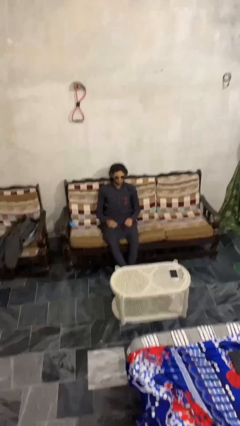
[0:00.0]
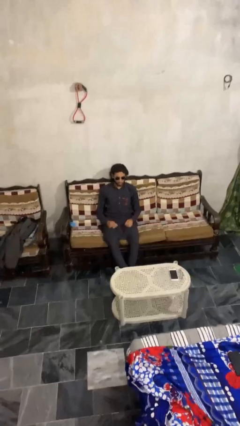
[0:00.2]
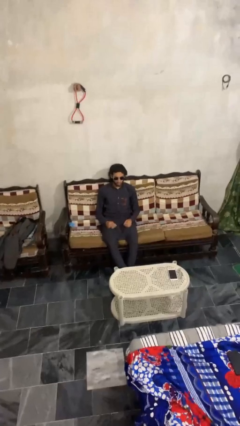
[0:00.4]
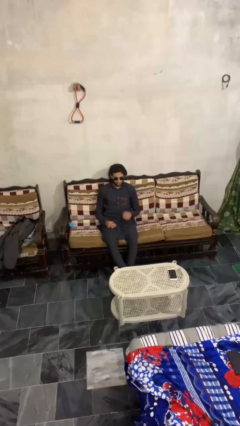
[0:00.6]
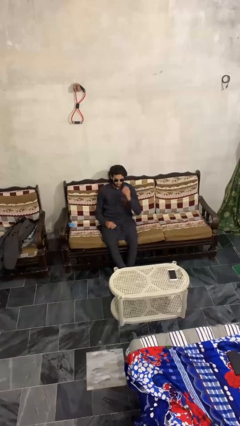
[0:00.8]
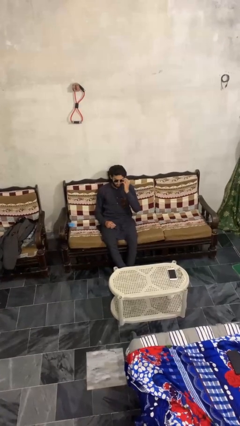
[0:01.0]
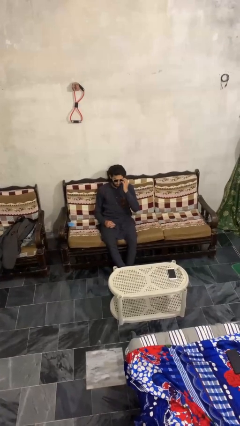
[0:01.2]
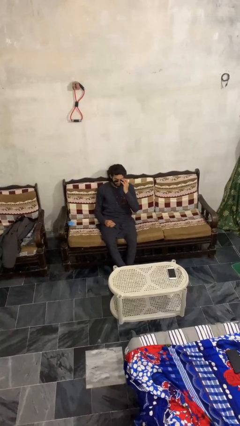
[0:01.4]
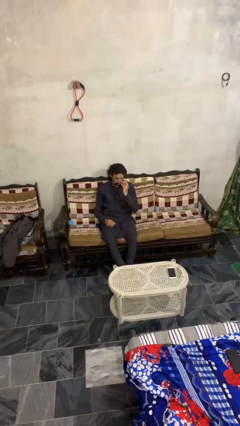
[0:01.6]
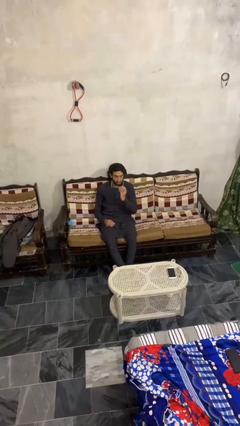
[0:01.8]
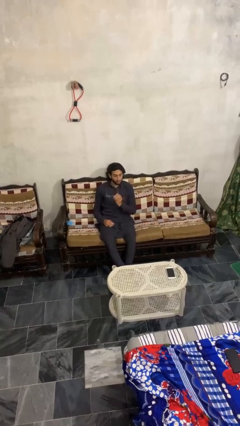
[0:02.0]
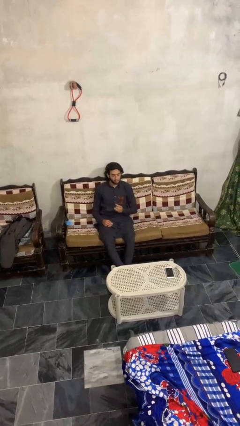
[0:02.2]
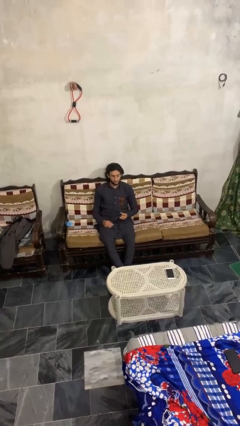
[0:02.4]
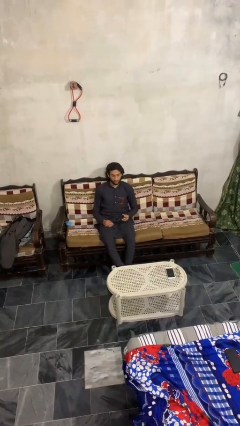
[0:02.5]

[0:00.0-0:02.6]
person takes off sunglasses

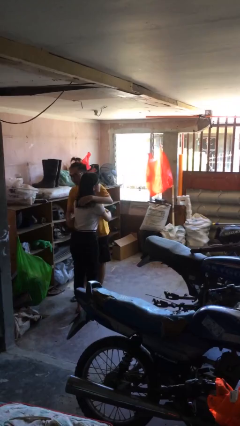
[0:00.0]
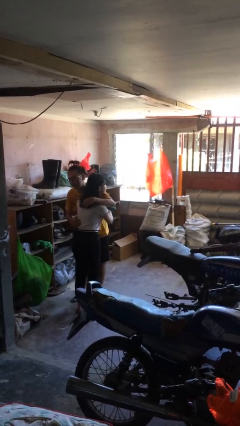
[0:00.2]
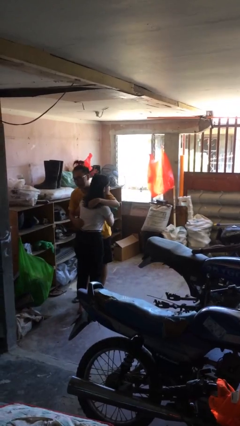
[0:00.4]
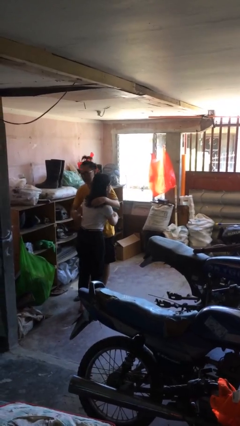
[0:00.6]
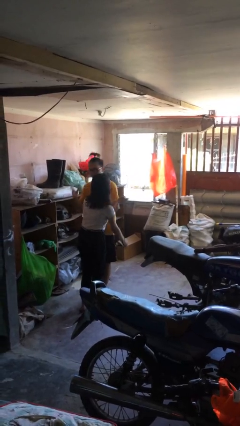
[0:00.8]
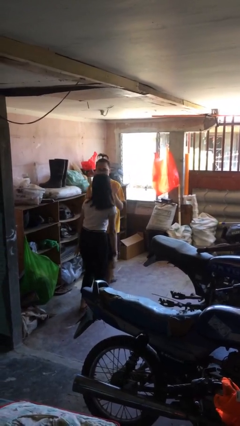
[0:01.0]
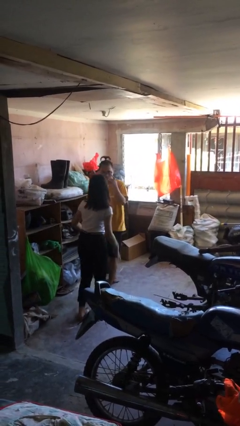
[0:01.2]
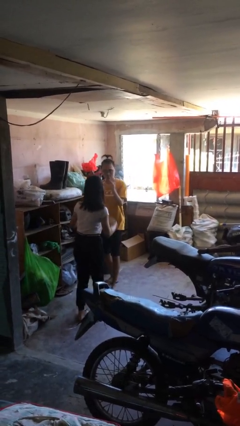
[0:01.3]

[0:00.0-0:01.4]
person embraces person

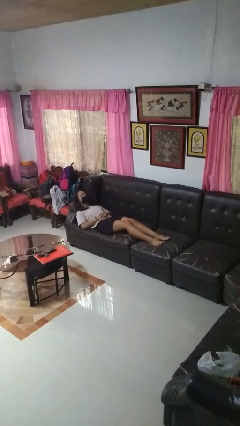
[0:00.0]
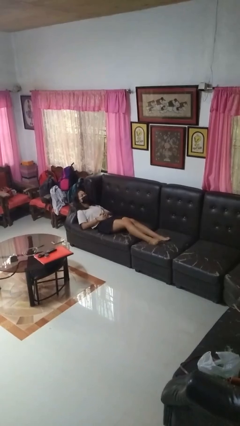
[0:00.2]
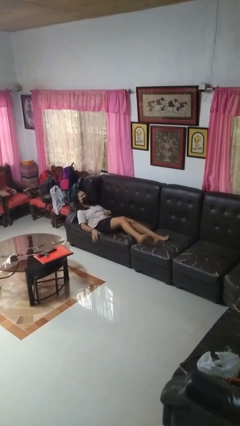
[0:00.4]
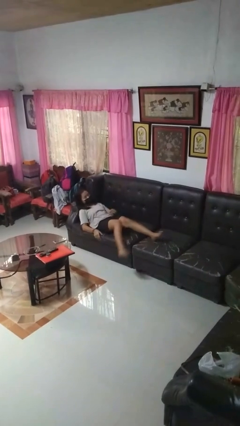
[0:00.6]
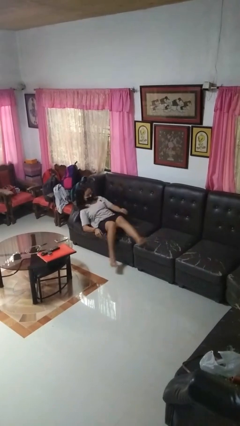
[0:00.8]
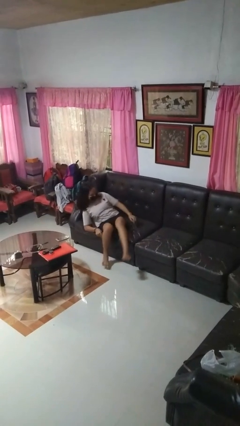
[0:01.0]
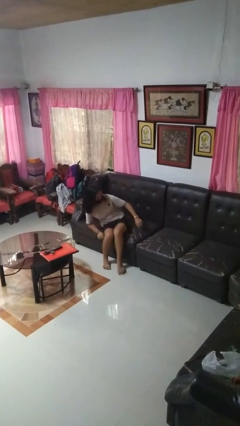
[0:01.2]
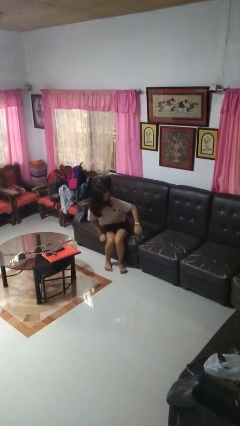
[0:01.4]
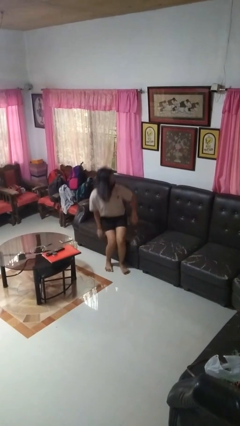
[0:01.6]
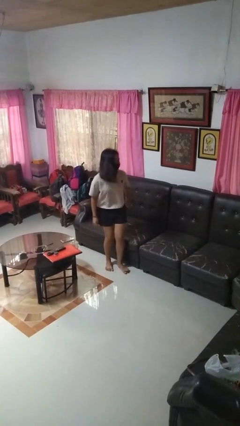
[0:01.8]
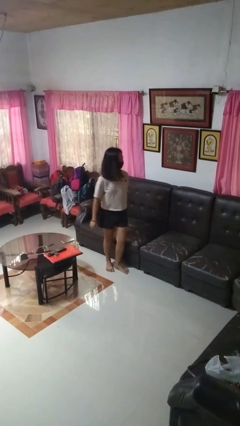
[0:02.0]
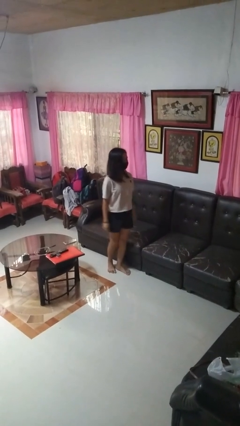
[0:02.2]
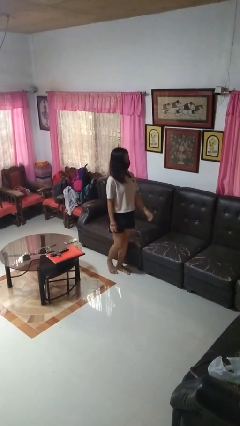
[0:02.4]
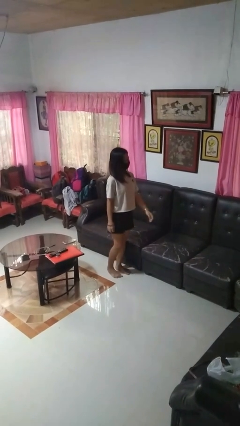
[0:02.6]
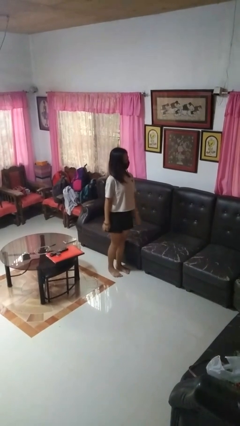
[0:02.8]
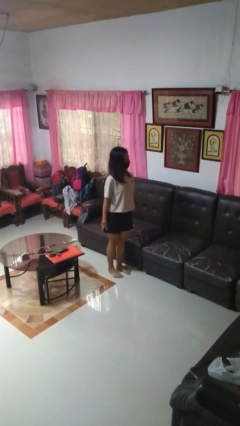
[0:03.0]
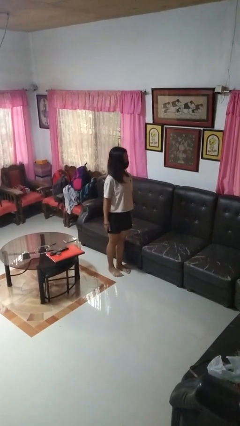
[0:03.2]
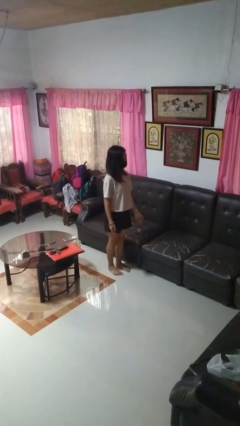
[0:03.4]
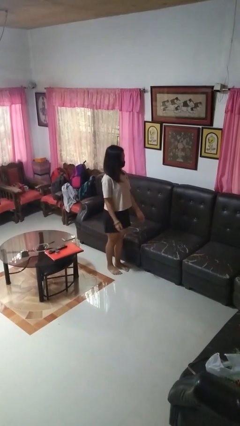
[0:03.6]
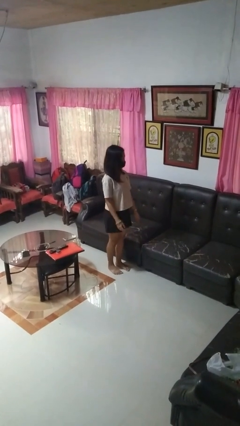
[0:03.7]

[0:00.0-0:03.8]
person stands up

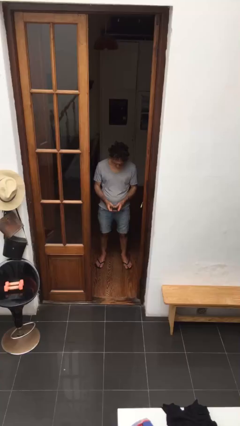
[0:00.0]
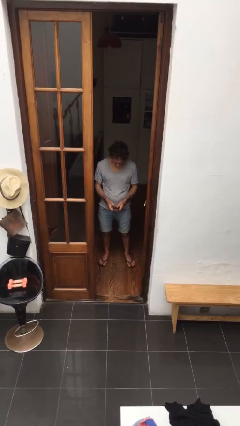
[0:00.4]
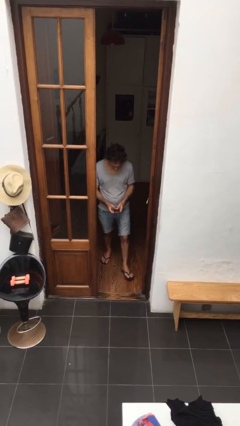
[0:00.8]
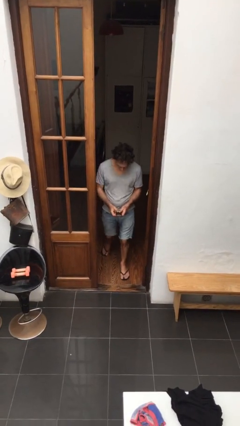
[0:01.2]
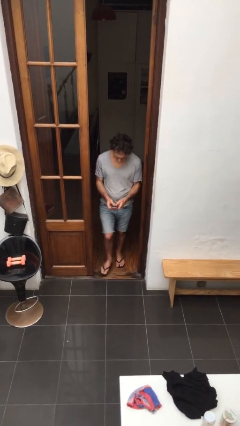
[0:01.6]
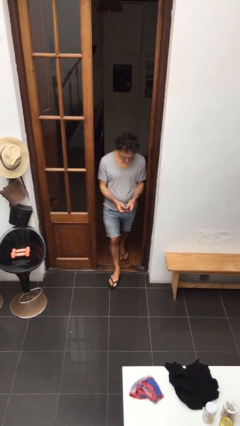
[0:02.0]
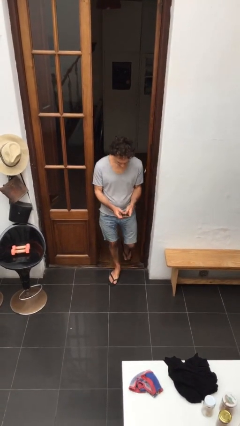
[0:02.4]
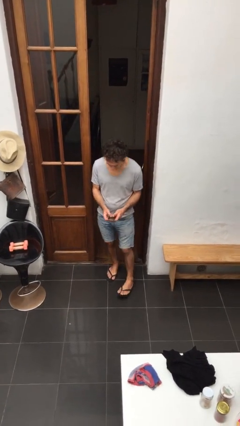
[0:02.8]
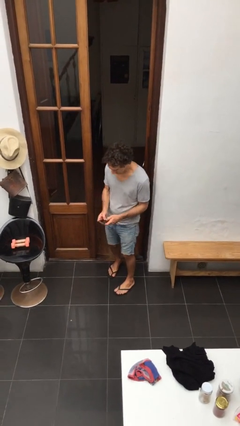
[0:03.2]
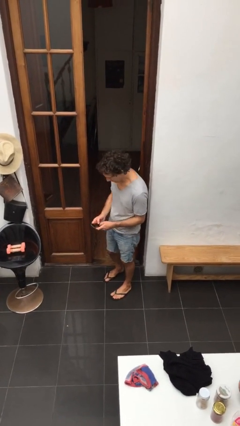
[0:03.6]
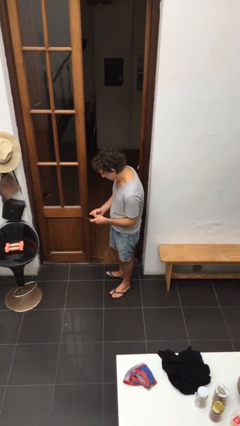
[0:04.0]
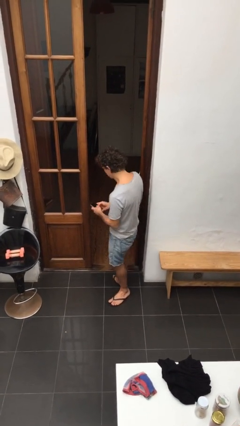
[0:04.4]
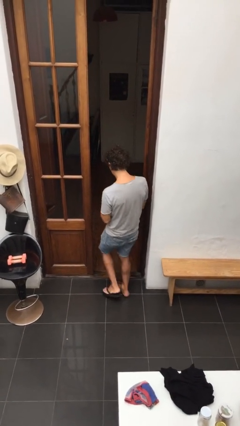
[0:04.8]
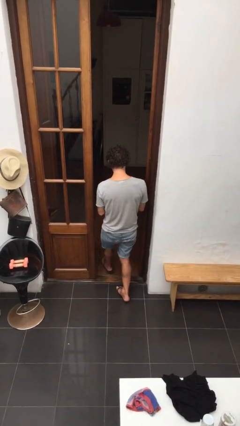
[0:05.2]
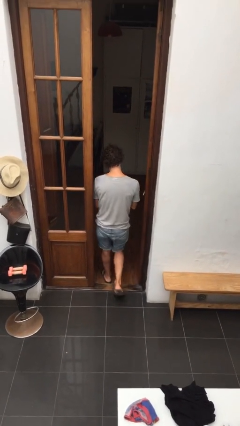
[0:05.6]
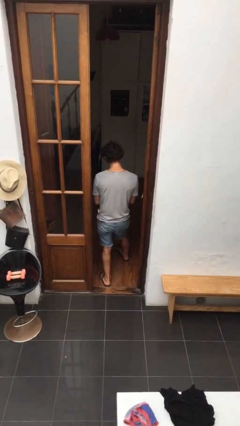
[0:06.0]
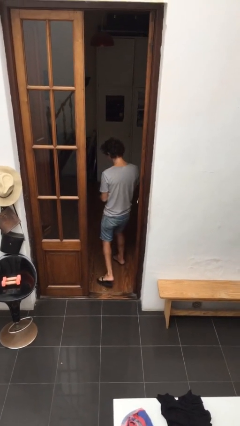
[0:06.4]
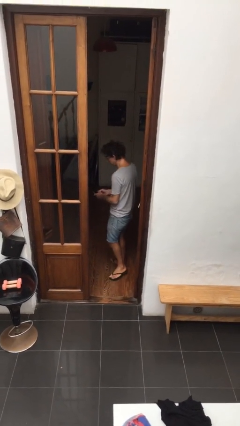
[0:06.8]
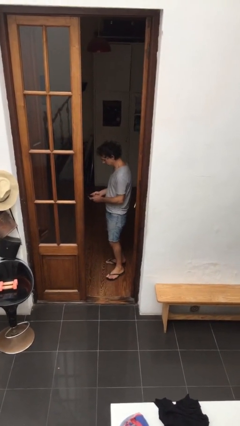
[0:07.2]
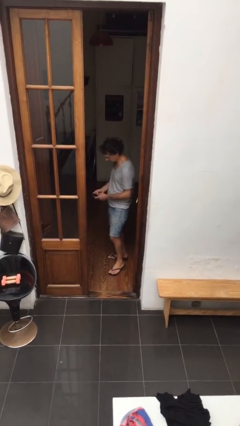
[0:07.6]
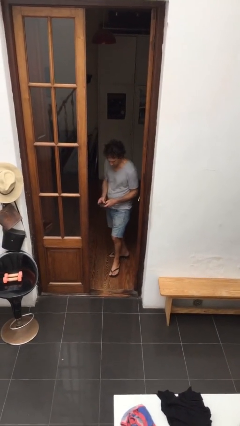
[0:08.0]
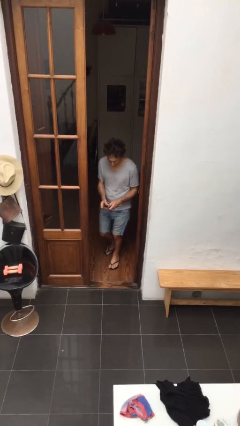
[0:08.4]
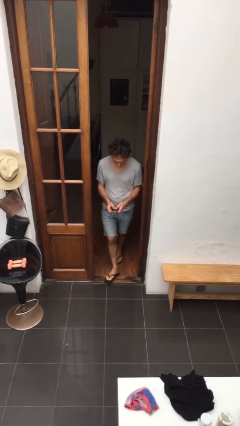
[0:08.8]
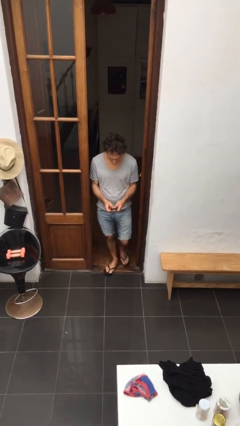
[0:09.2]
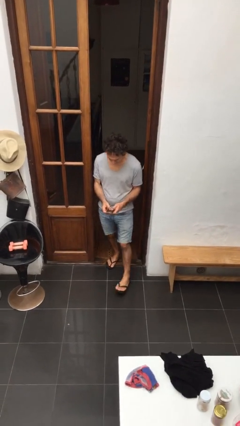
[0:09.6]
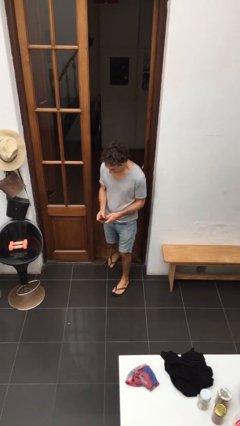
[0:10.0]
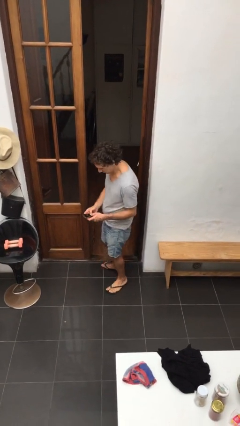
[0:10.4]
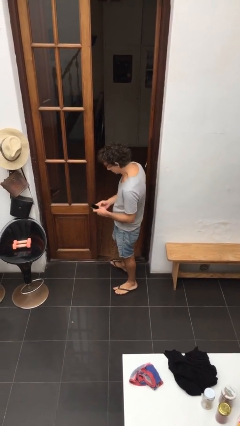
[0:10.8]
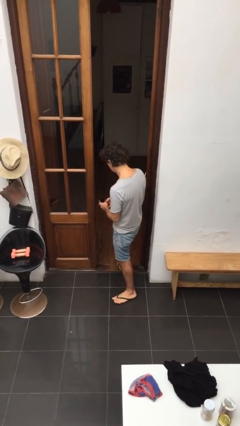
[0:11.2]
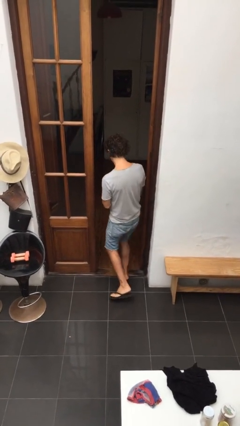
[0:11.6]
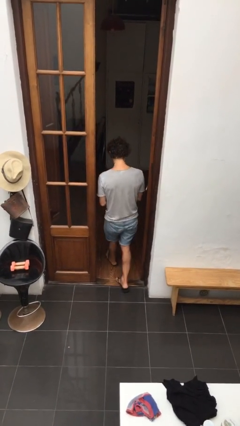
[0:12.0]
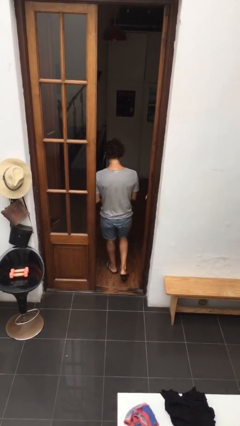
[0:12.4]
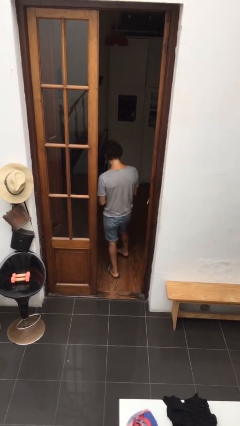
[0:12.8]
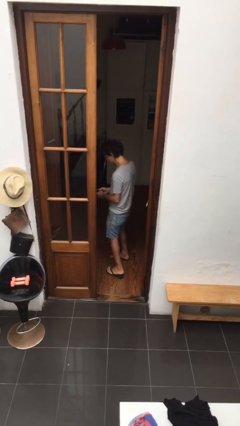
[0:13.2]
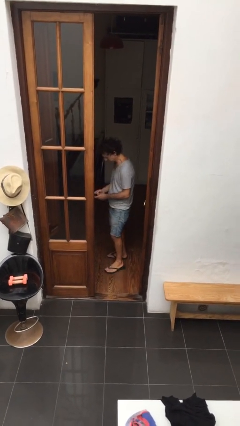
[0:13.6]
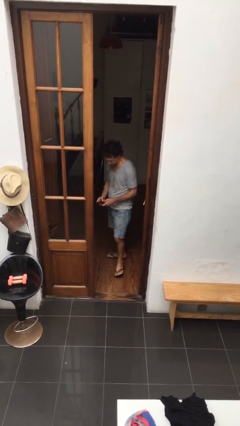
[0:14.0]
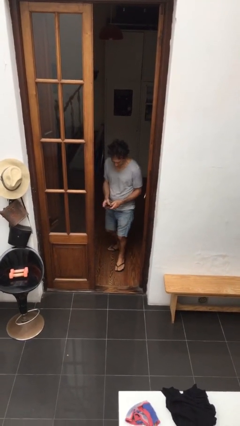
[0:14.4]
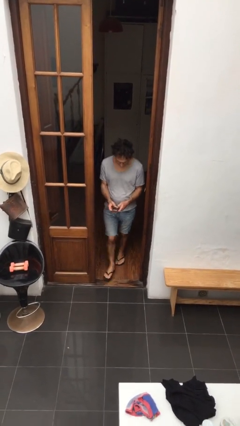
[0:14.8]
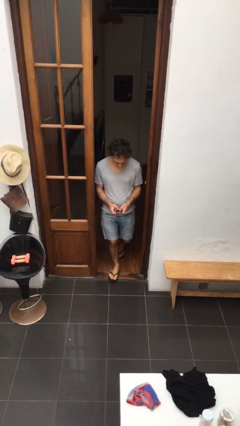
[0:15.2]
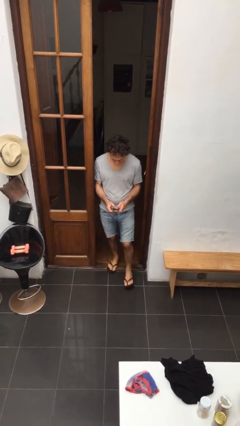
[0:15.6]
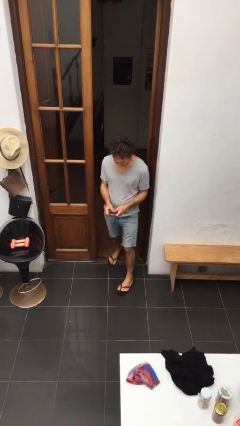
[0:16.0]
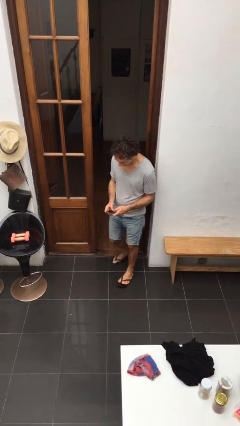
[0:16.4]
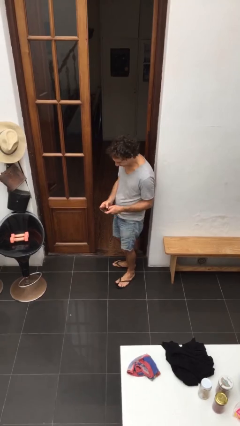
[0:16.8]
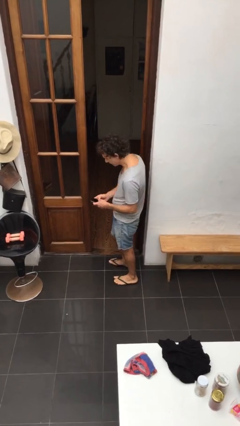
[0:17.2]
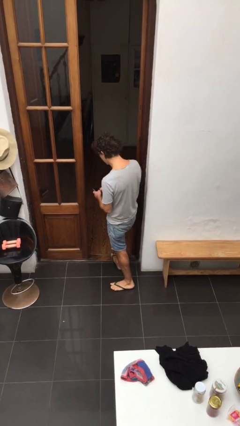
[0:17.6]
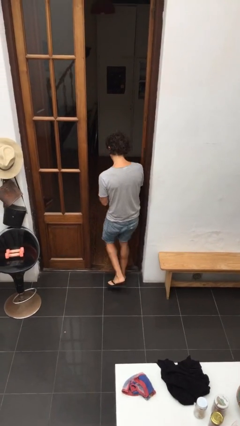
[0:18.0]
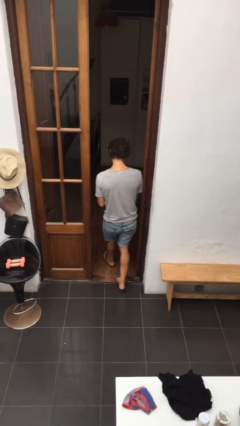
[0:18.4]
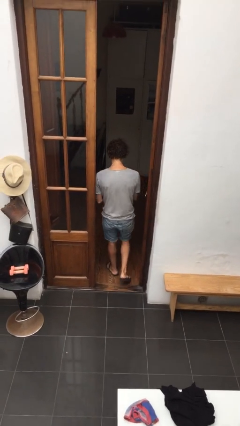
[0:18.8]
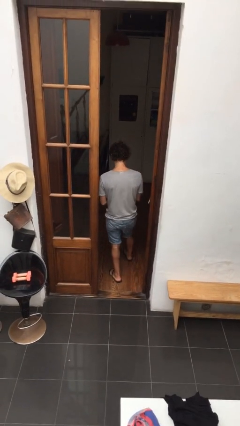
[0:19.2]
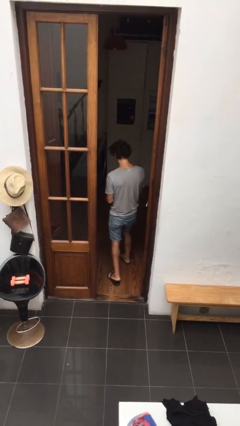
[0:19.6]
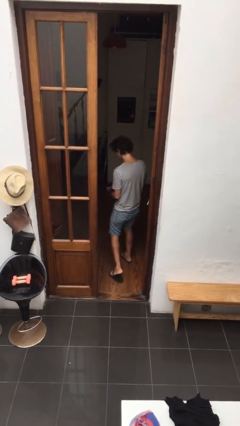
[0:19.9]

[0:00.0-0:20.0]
person texts on phone

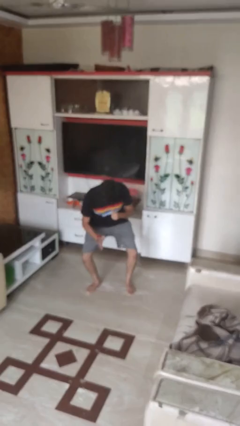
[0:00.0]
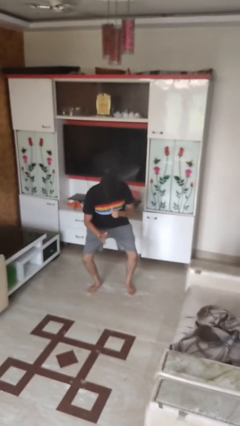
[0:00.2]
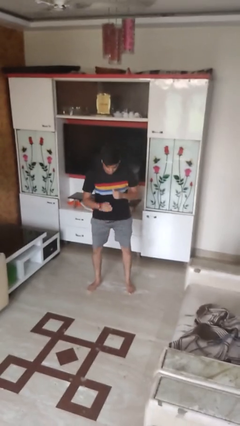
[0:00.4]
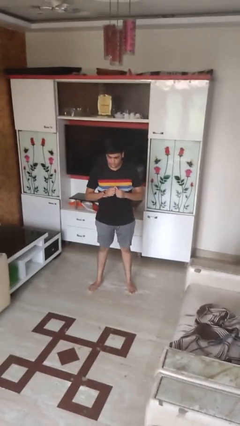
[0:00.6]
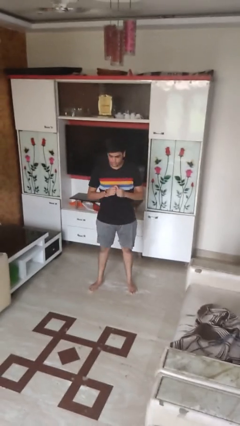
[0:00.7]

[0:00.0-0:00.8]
person karate chop
